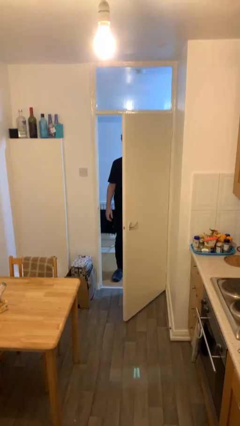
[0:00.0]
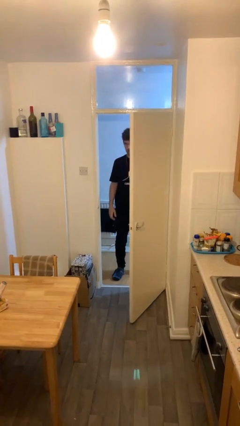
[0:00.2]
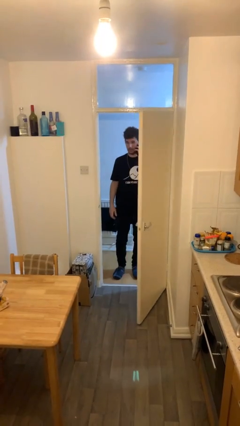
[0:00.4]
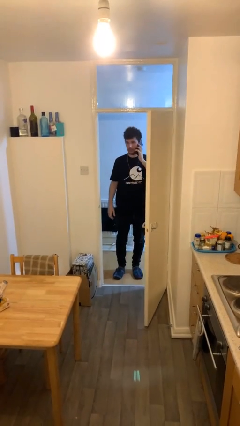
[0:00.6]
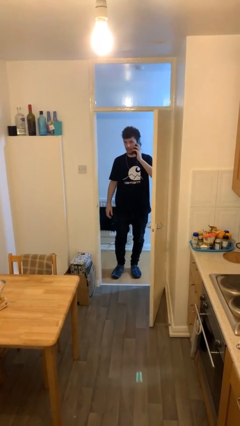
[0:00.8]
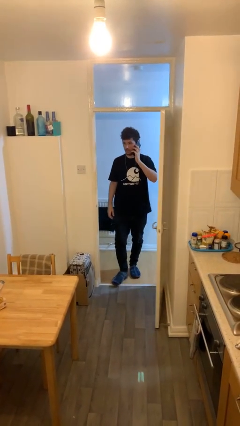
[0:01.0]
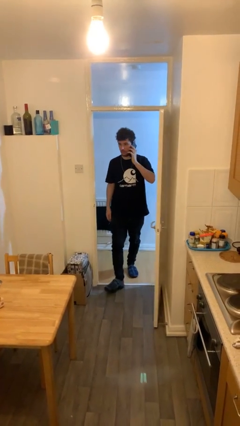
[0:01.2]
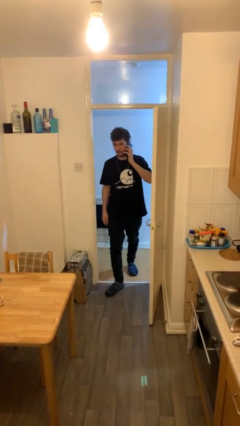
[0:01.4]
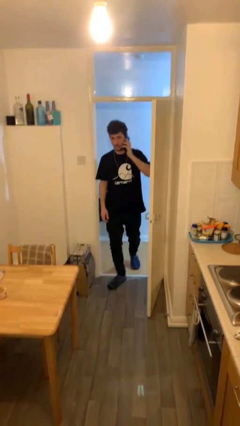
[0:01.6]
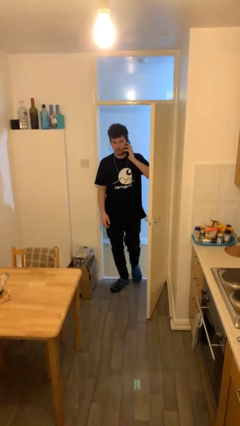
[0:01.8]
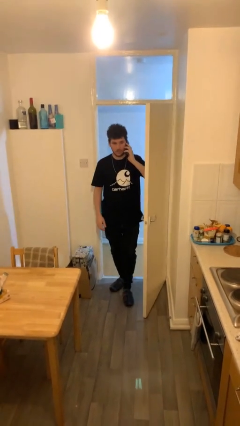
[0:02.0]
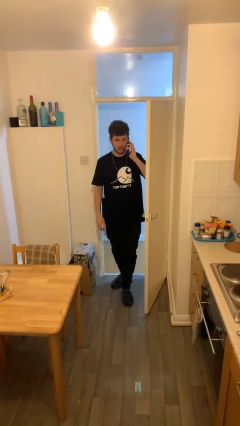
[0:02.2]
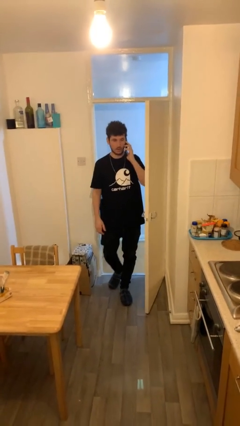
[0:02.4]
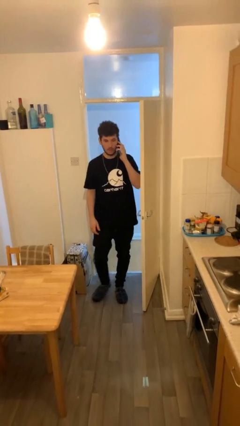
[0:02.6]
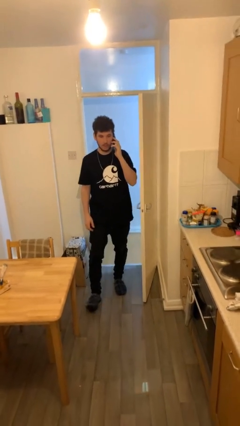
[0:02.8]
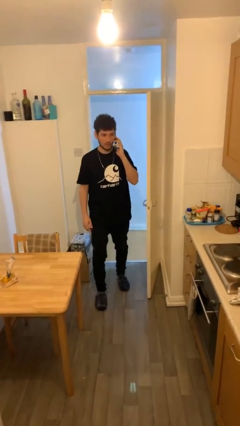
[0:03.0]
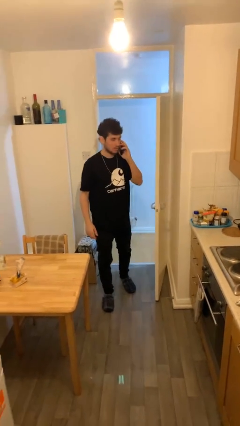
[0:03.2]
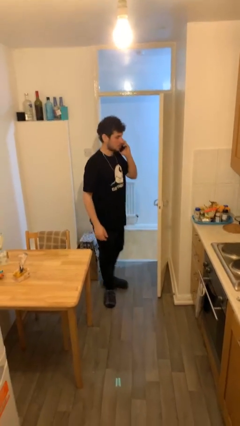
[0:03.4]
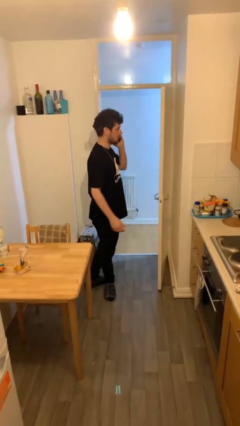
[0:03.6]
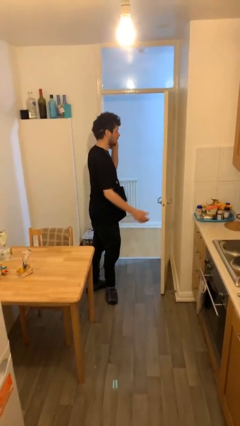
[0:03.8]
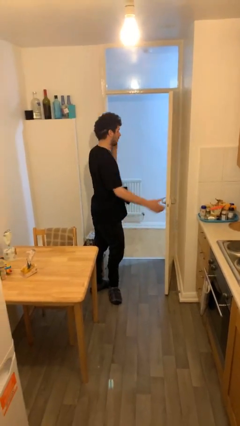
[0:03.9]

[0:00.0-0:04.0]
person enters scene through structure

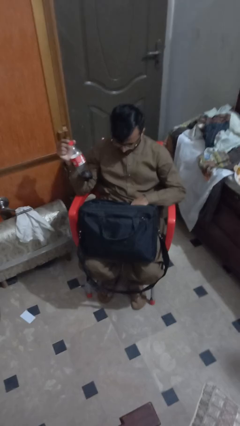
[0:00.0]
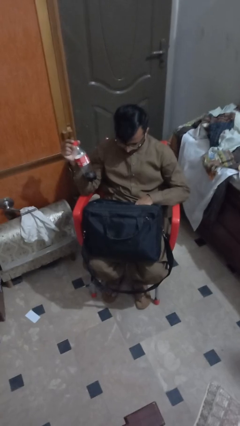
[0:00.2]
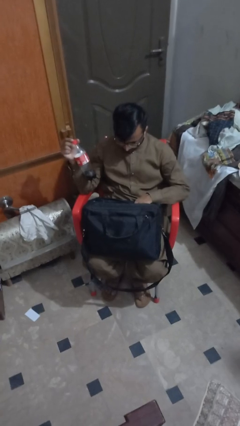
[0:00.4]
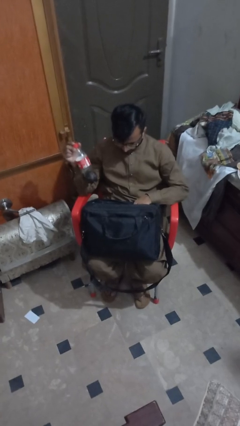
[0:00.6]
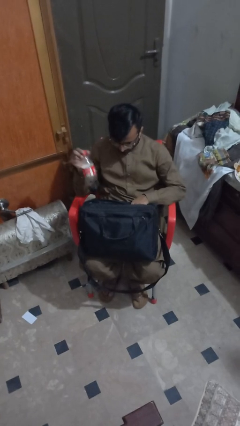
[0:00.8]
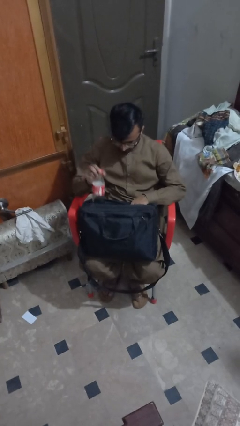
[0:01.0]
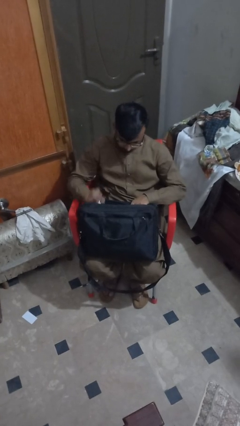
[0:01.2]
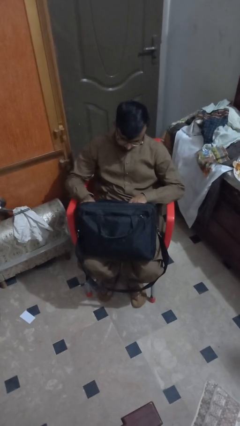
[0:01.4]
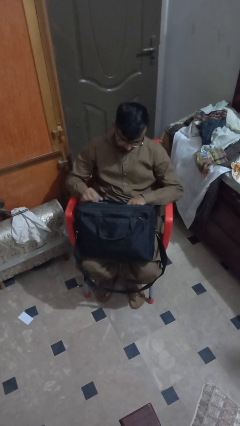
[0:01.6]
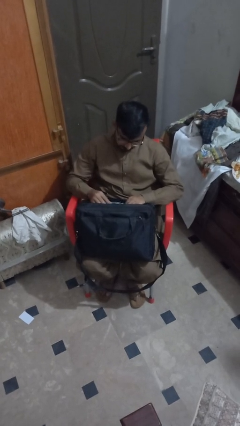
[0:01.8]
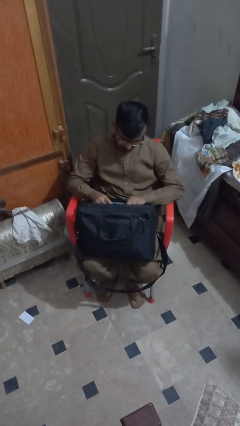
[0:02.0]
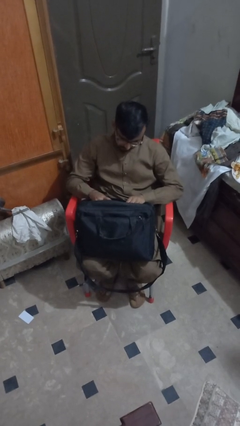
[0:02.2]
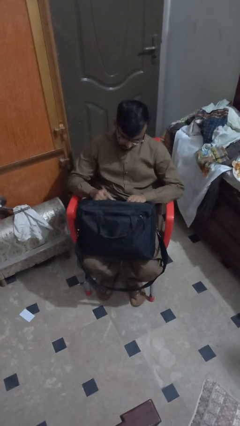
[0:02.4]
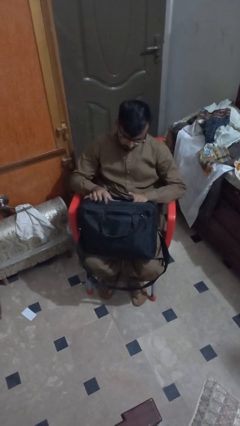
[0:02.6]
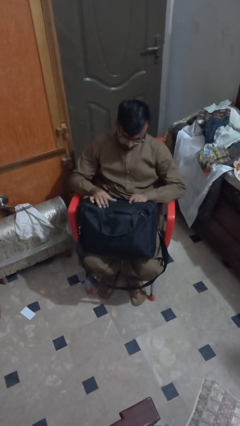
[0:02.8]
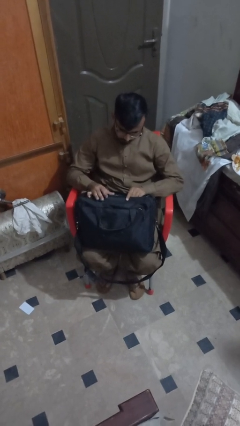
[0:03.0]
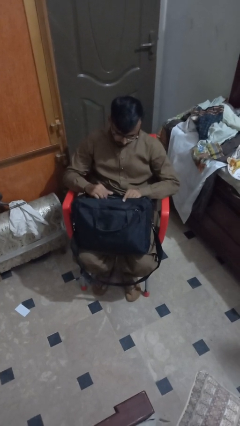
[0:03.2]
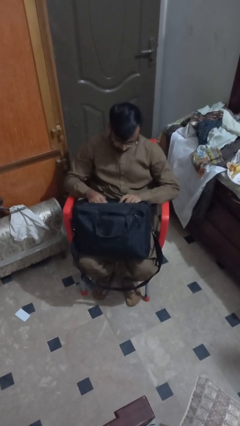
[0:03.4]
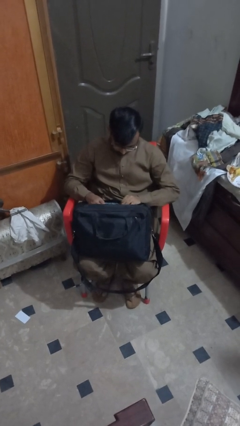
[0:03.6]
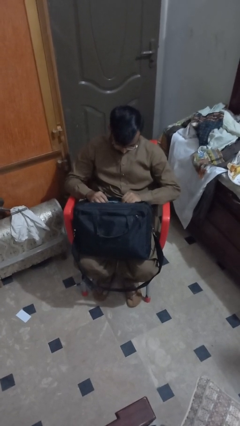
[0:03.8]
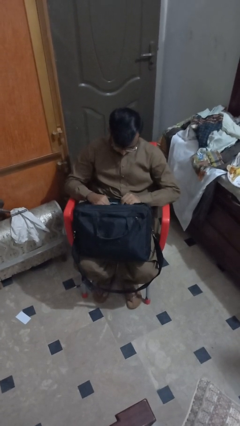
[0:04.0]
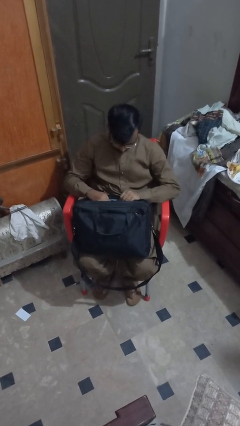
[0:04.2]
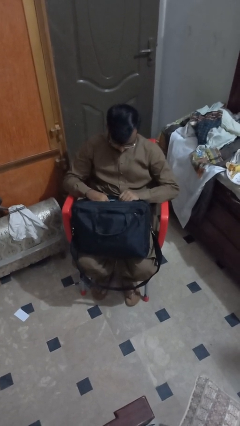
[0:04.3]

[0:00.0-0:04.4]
person puts object into bag

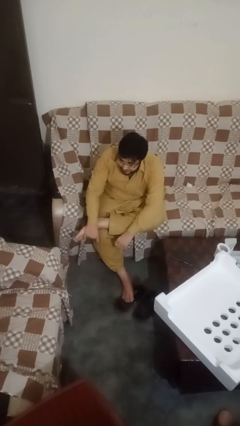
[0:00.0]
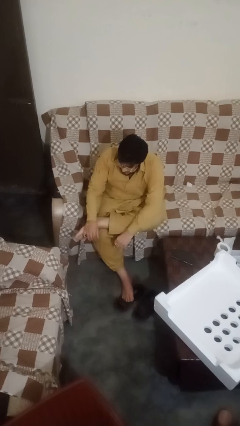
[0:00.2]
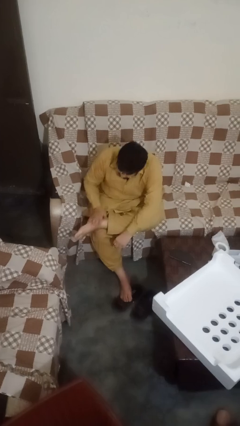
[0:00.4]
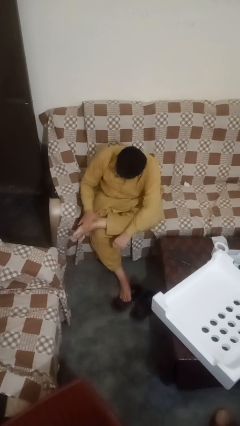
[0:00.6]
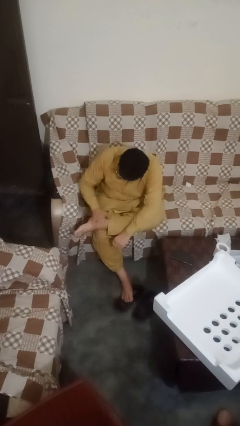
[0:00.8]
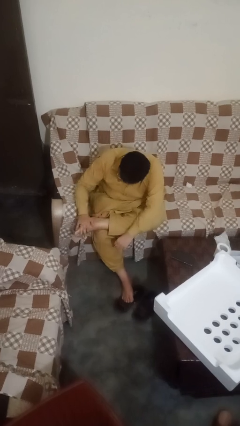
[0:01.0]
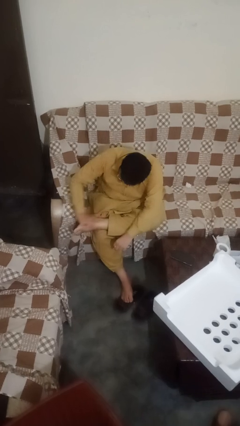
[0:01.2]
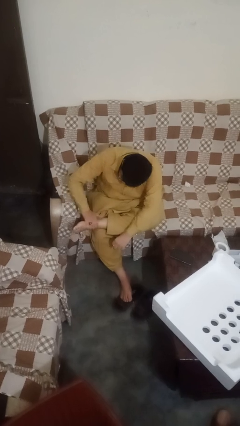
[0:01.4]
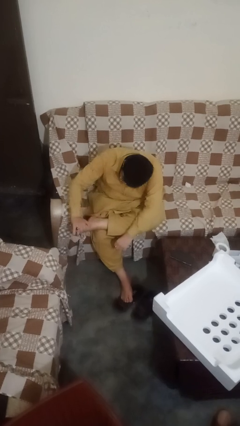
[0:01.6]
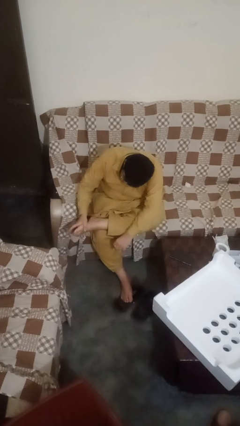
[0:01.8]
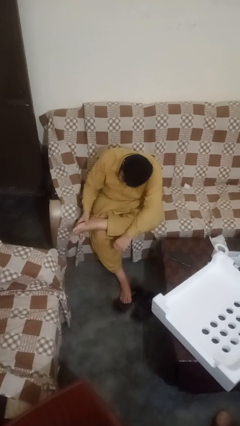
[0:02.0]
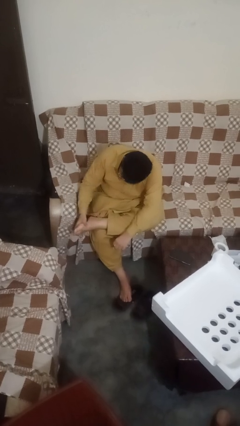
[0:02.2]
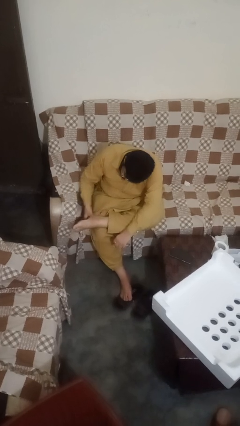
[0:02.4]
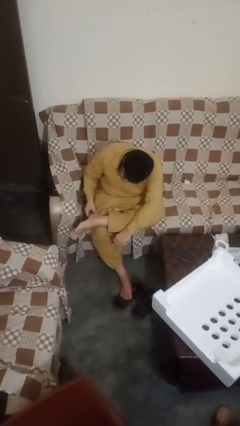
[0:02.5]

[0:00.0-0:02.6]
person rubs foot

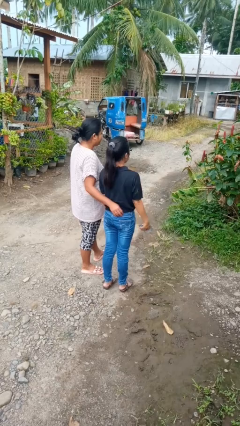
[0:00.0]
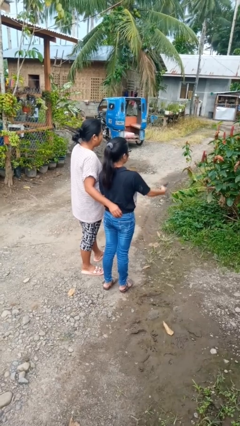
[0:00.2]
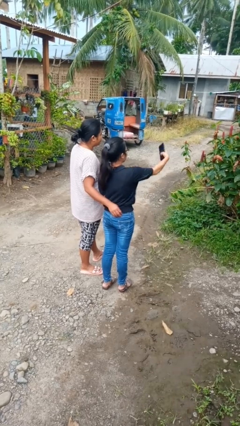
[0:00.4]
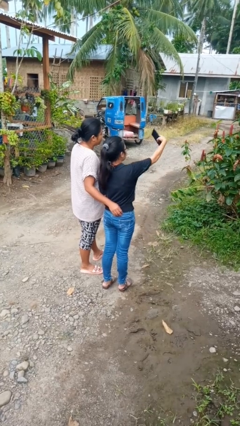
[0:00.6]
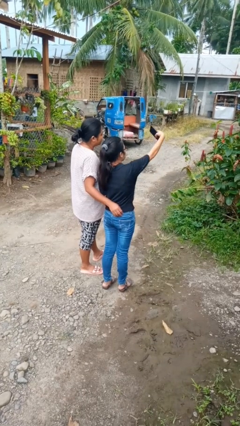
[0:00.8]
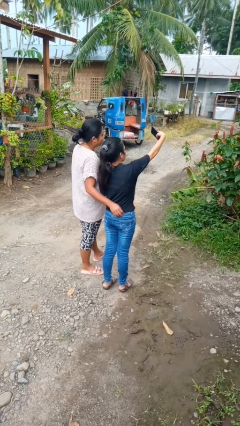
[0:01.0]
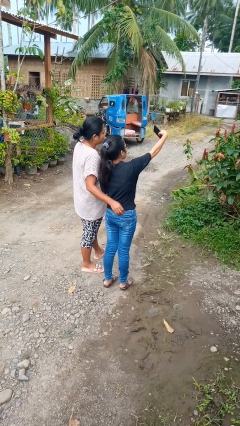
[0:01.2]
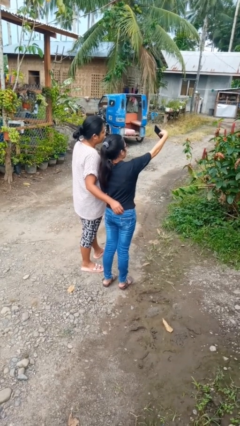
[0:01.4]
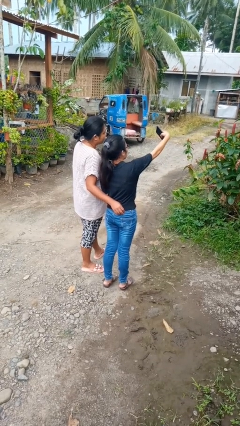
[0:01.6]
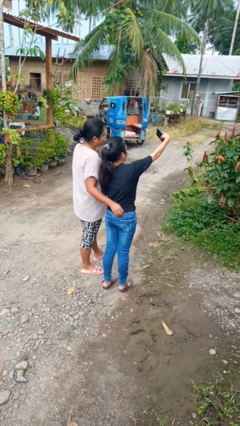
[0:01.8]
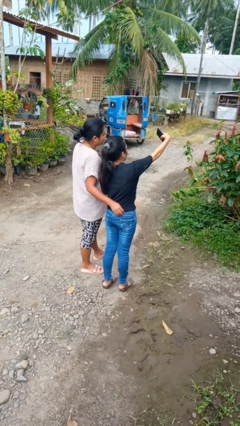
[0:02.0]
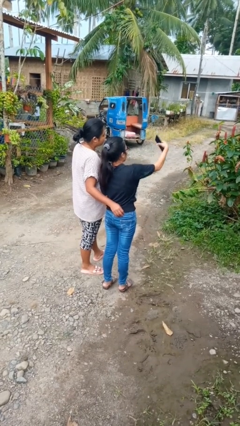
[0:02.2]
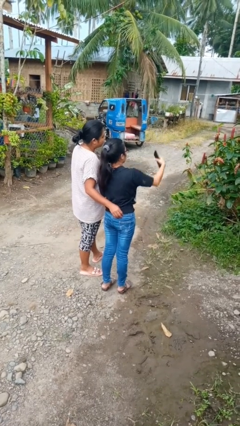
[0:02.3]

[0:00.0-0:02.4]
person takes selfie with person

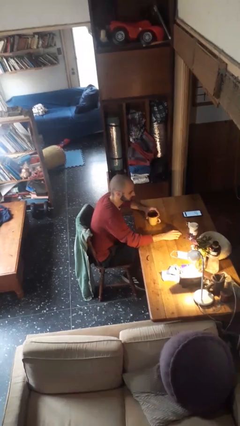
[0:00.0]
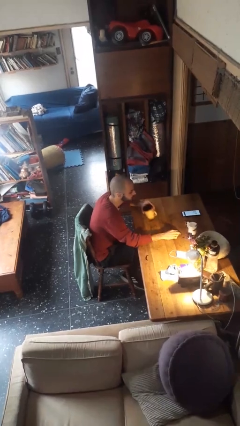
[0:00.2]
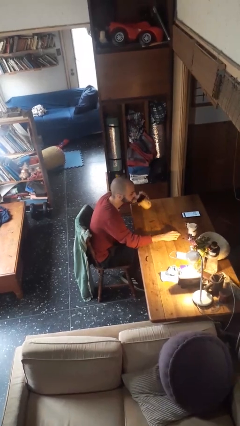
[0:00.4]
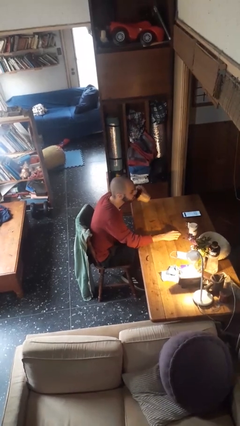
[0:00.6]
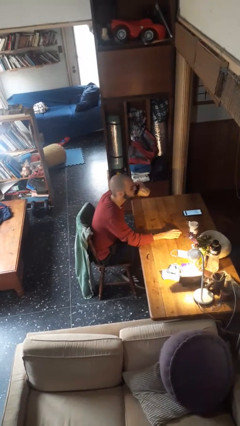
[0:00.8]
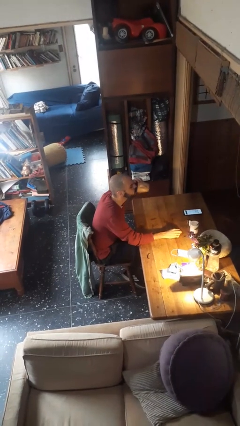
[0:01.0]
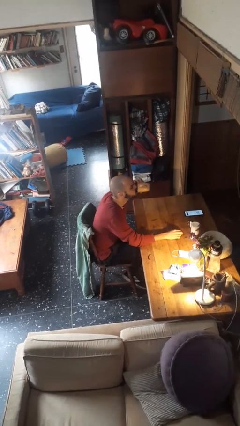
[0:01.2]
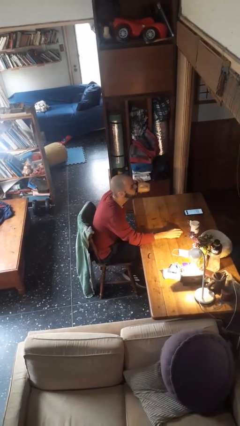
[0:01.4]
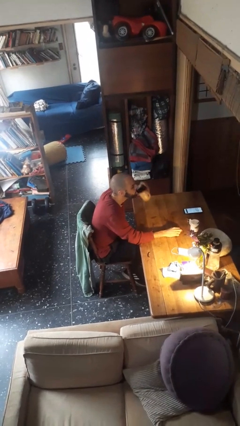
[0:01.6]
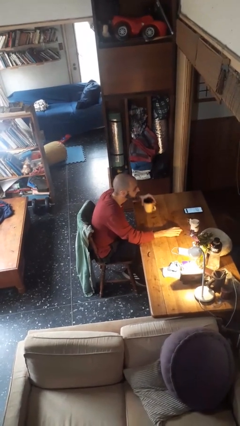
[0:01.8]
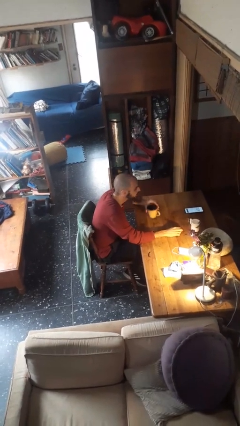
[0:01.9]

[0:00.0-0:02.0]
person drinks from mug

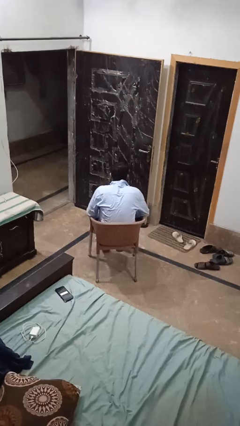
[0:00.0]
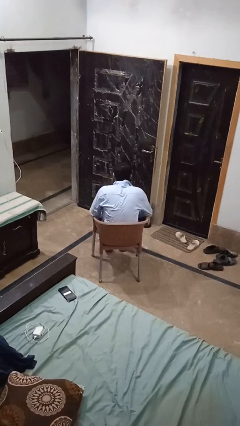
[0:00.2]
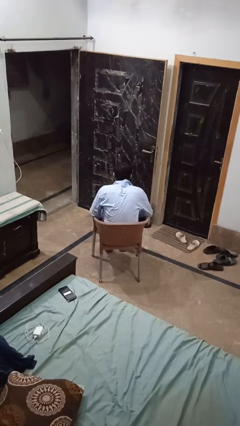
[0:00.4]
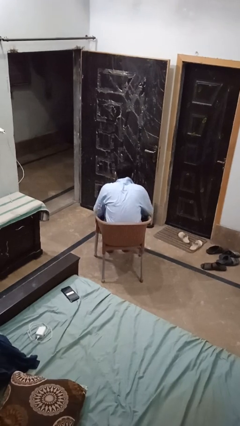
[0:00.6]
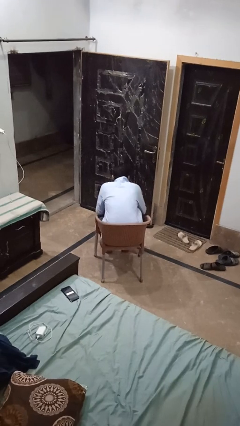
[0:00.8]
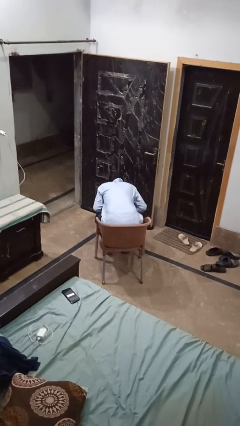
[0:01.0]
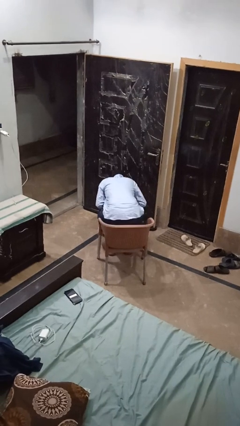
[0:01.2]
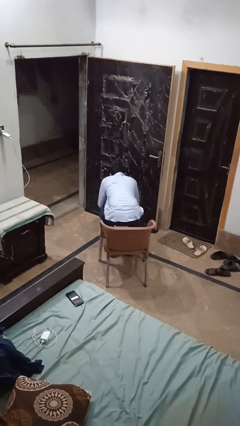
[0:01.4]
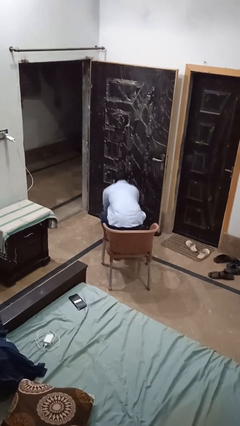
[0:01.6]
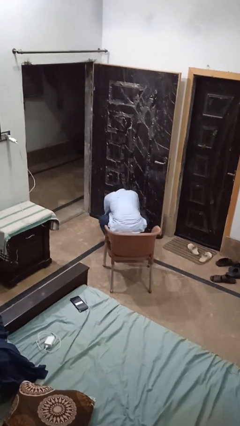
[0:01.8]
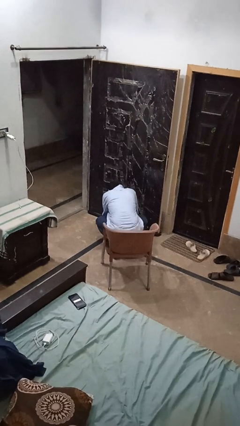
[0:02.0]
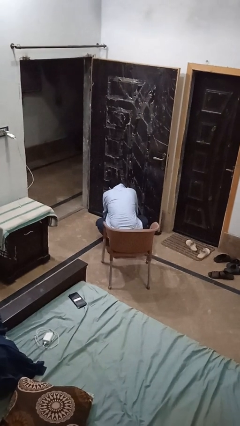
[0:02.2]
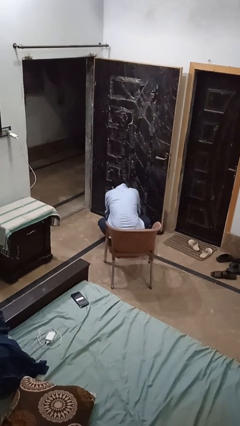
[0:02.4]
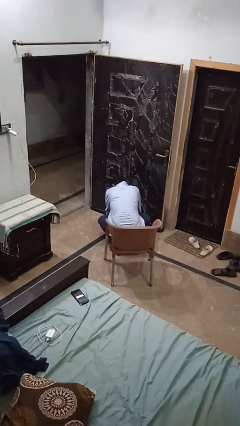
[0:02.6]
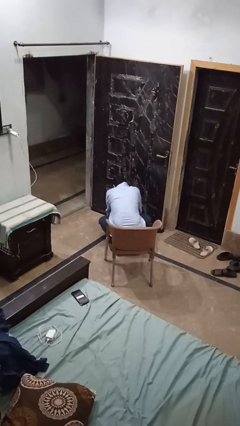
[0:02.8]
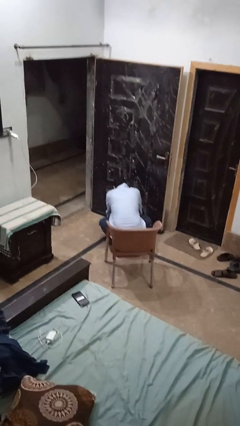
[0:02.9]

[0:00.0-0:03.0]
person falls from chair
